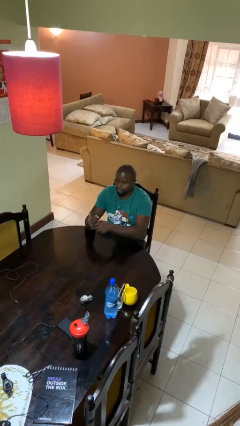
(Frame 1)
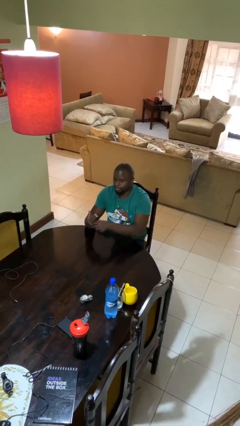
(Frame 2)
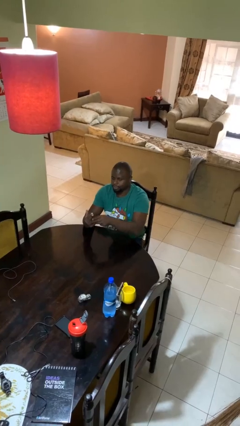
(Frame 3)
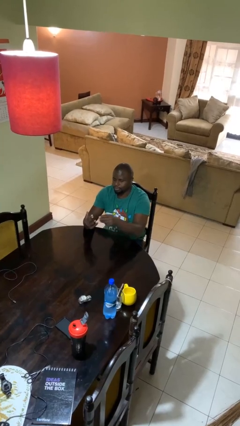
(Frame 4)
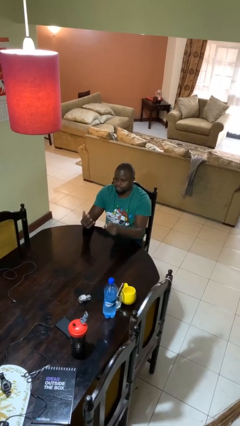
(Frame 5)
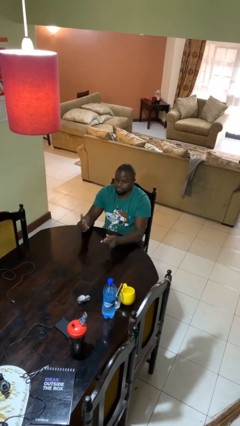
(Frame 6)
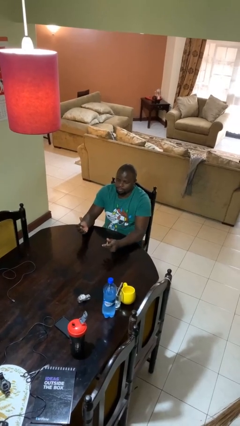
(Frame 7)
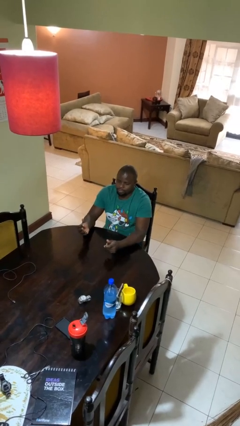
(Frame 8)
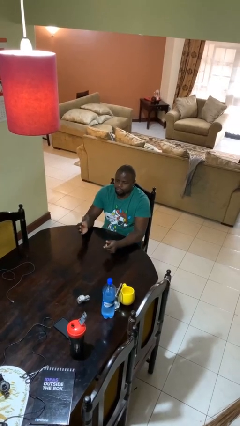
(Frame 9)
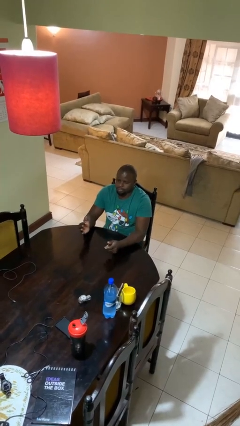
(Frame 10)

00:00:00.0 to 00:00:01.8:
person takes off ring

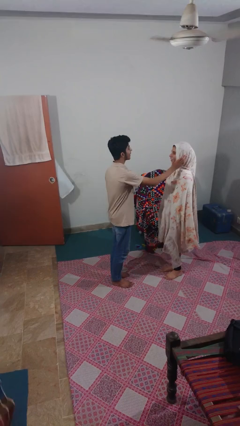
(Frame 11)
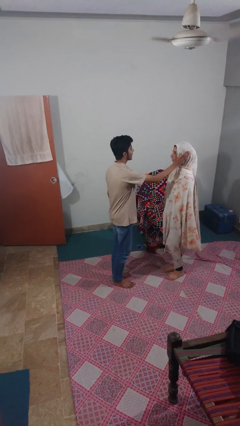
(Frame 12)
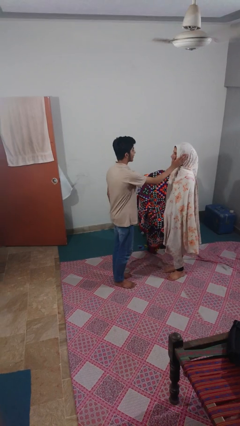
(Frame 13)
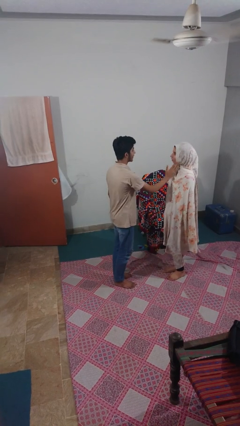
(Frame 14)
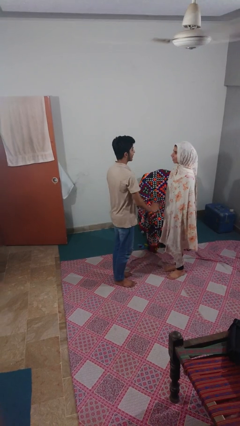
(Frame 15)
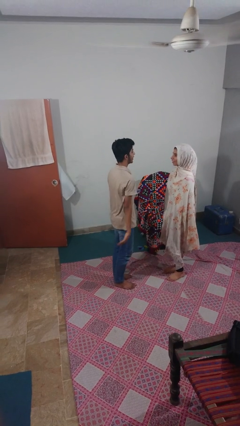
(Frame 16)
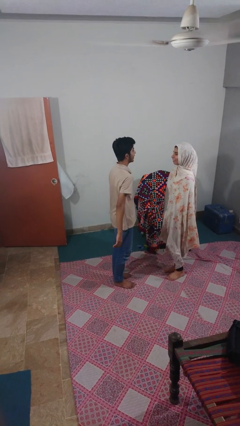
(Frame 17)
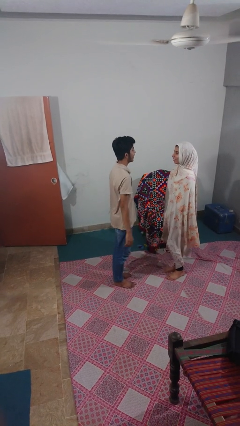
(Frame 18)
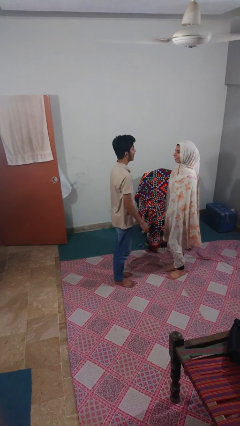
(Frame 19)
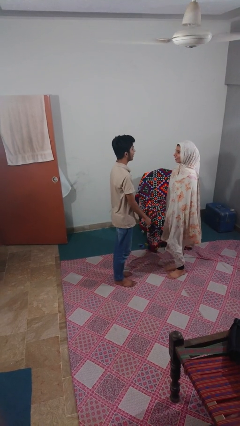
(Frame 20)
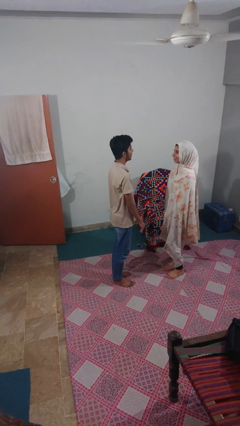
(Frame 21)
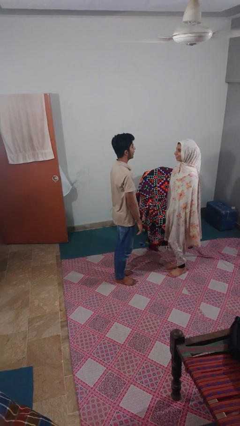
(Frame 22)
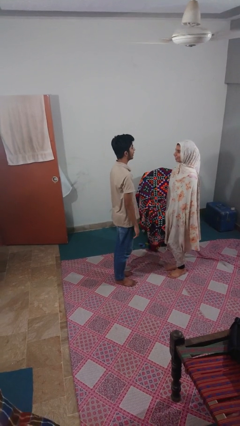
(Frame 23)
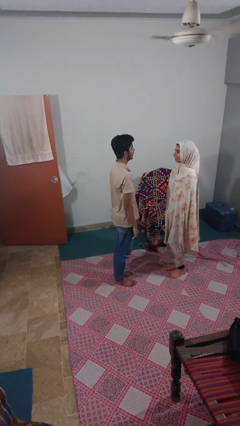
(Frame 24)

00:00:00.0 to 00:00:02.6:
person touches face of person

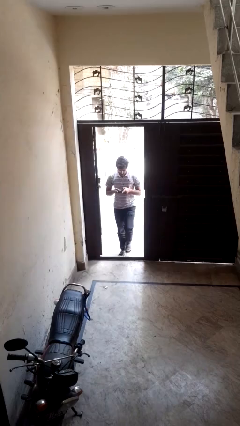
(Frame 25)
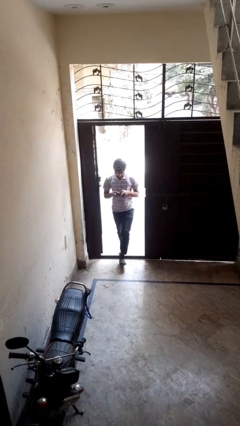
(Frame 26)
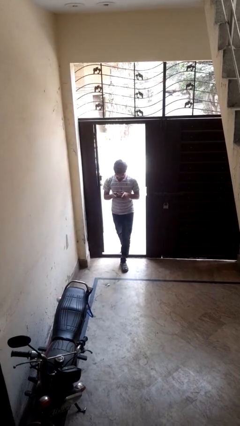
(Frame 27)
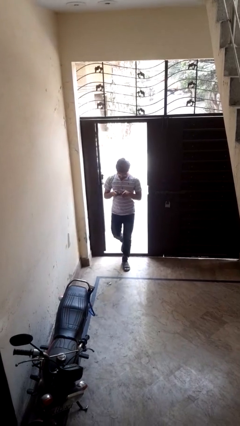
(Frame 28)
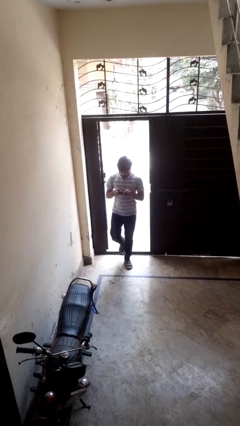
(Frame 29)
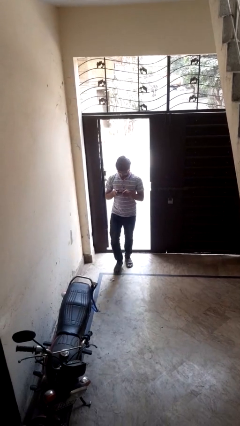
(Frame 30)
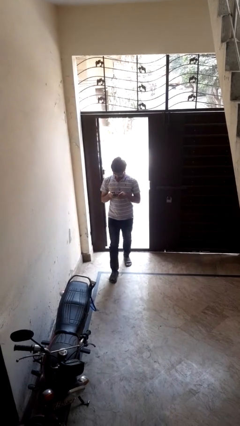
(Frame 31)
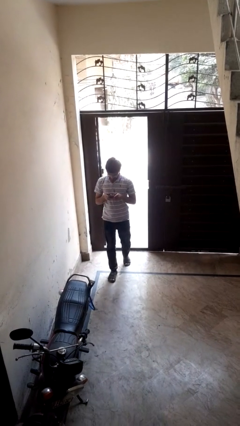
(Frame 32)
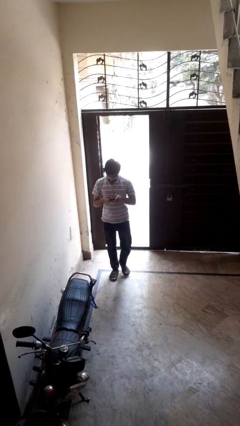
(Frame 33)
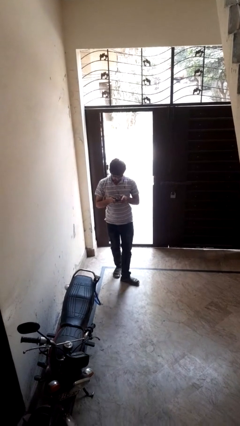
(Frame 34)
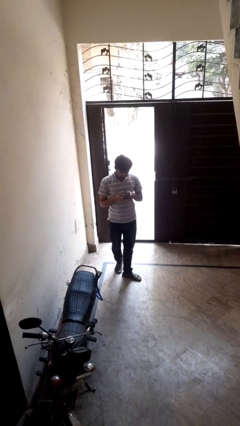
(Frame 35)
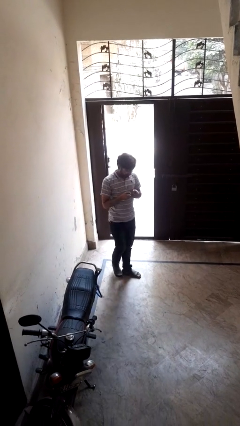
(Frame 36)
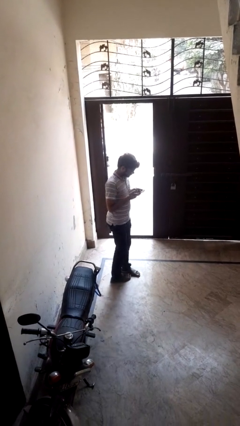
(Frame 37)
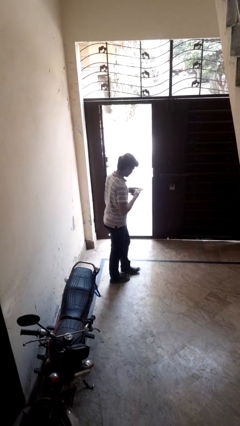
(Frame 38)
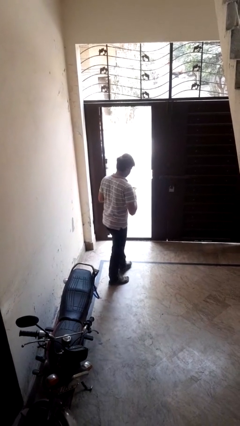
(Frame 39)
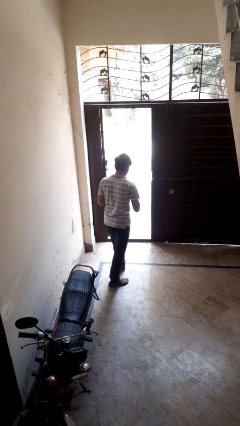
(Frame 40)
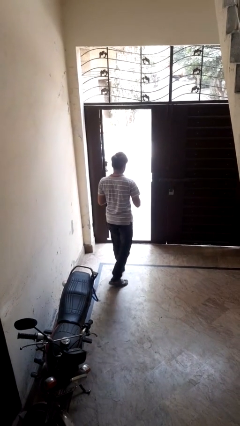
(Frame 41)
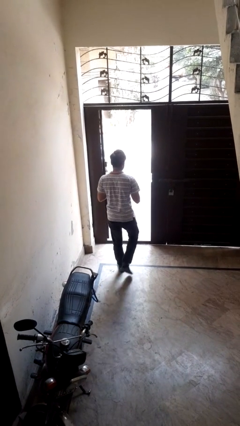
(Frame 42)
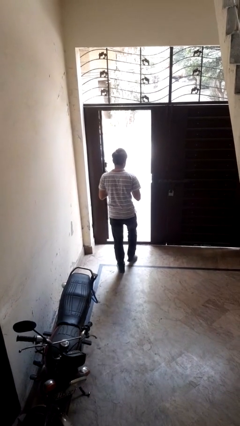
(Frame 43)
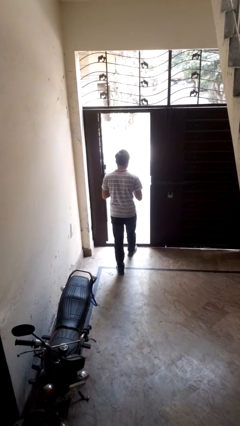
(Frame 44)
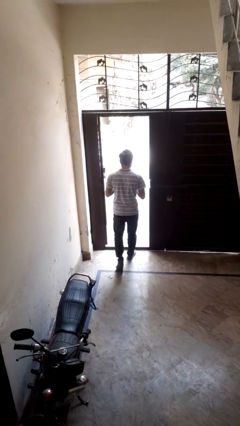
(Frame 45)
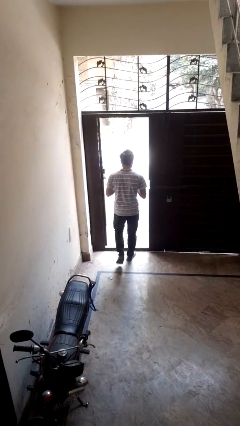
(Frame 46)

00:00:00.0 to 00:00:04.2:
person enters scene through structure

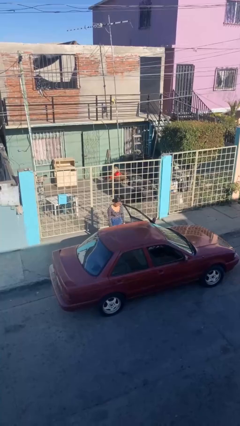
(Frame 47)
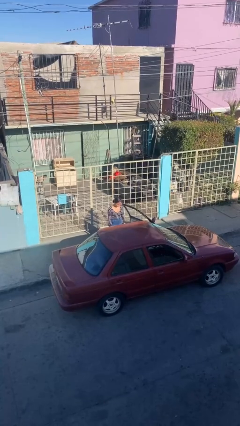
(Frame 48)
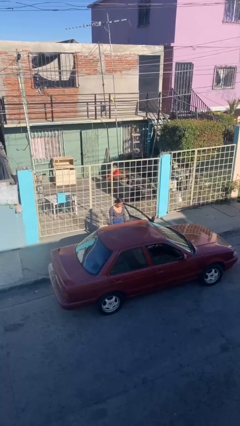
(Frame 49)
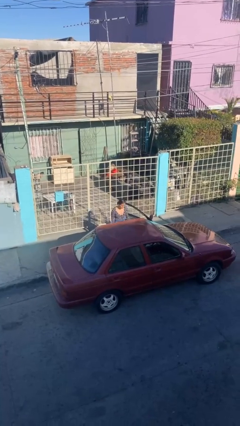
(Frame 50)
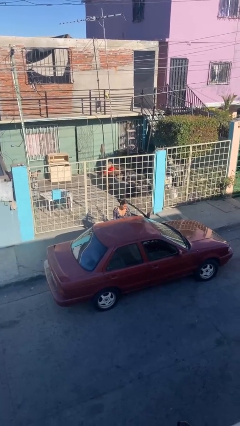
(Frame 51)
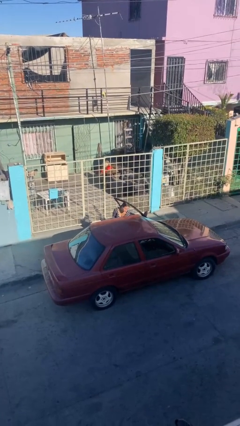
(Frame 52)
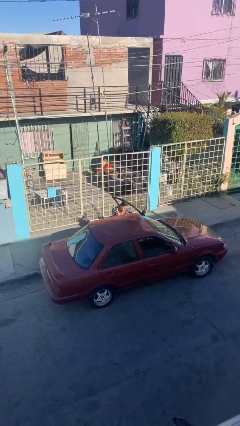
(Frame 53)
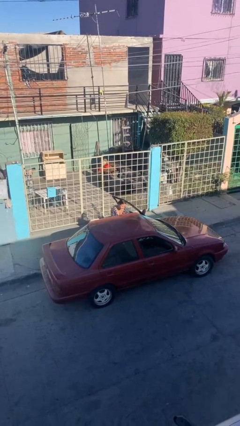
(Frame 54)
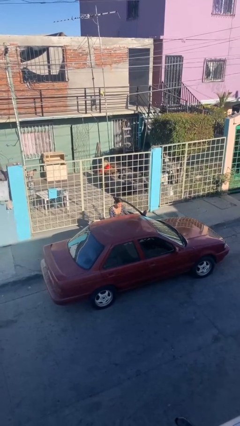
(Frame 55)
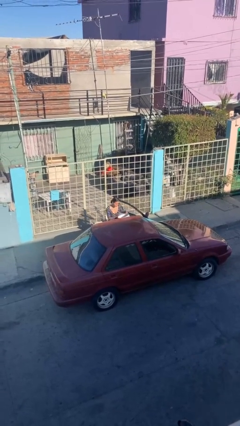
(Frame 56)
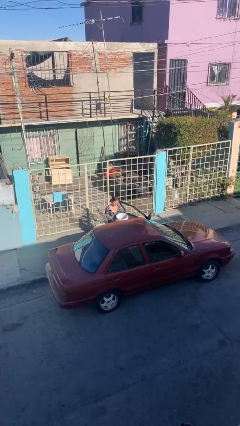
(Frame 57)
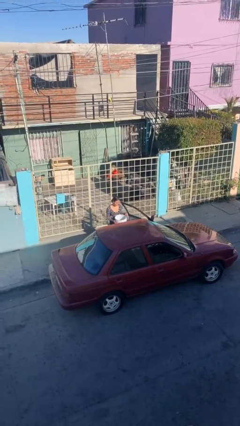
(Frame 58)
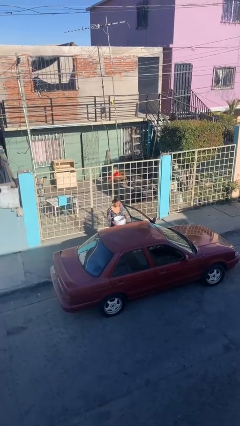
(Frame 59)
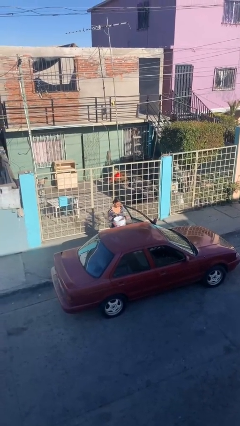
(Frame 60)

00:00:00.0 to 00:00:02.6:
person unloads car

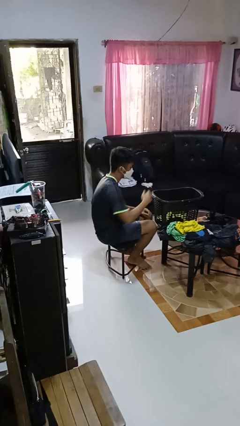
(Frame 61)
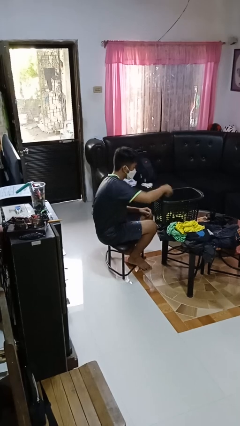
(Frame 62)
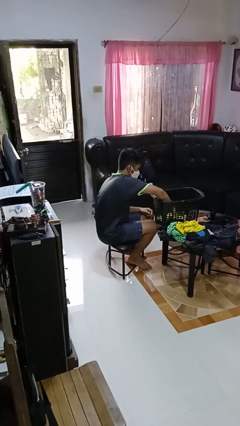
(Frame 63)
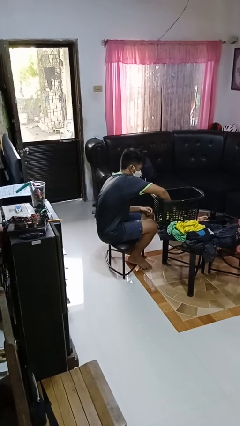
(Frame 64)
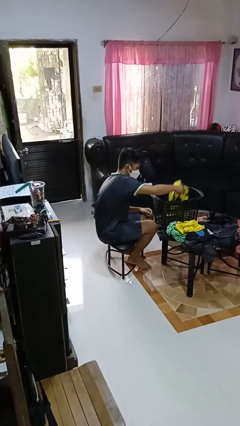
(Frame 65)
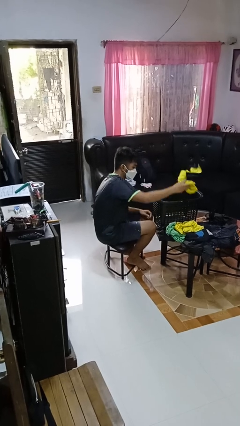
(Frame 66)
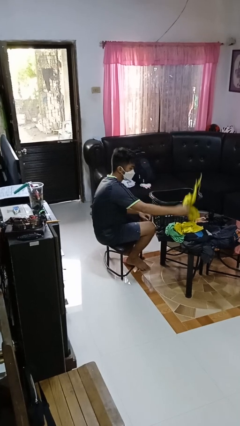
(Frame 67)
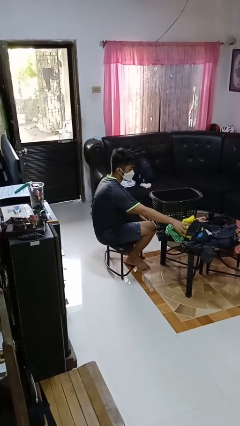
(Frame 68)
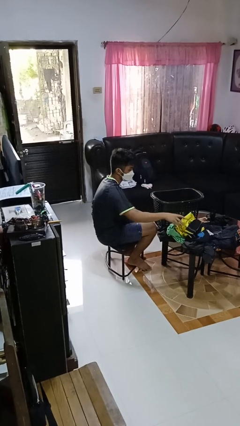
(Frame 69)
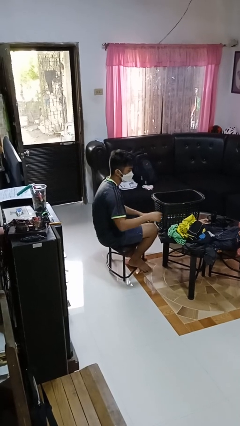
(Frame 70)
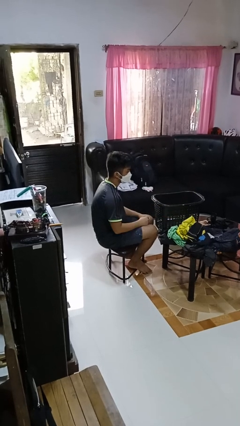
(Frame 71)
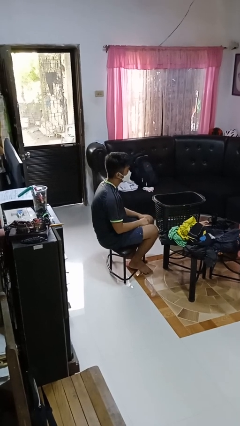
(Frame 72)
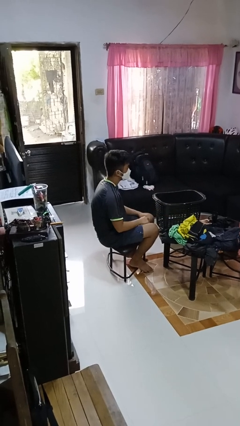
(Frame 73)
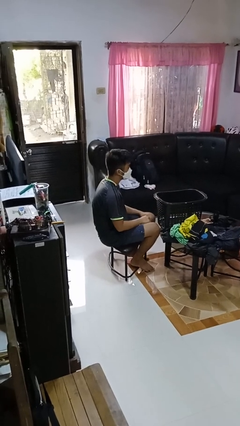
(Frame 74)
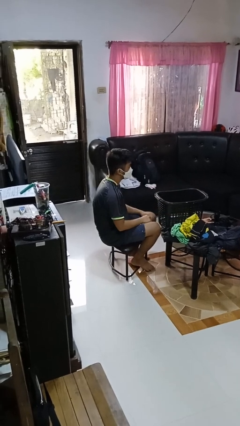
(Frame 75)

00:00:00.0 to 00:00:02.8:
person takes object from basket

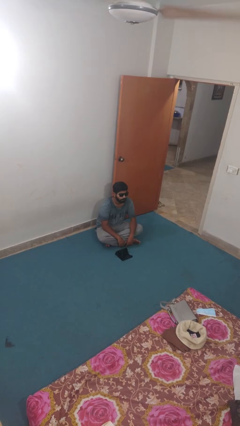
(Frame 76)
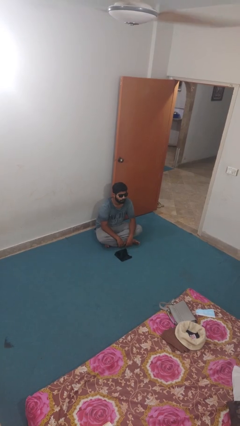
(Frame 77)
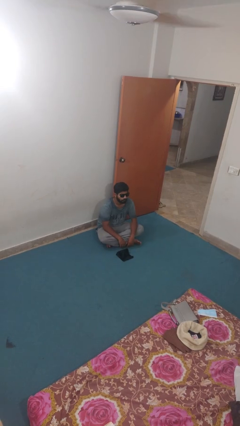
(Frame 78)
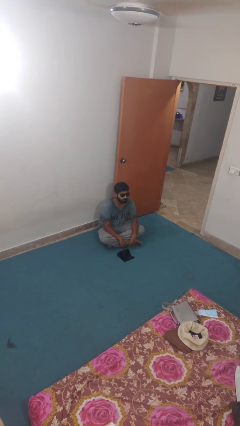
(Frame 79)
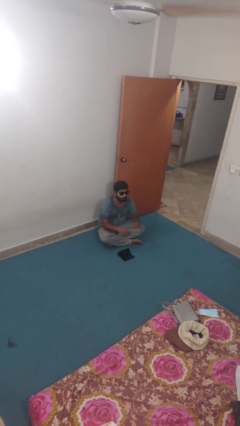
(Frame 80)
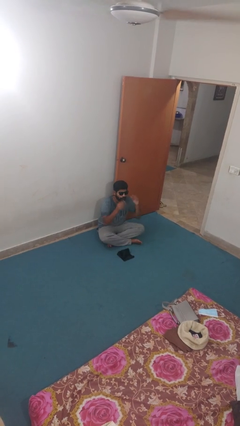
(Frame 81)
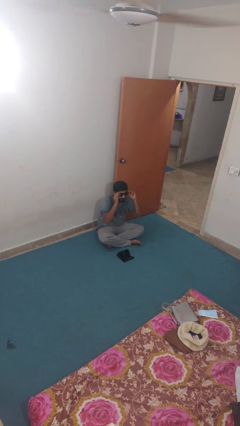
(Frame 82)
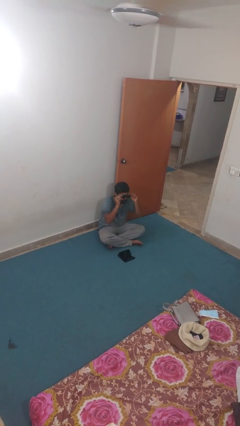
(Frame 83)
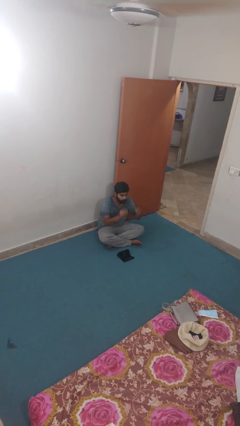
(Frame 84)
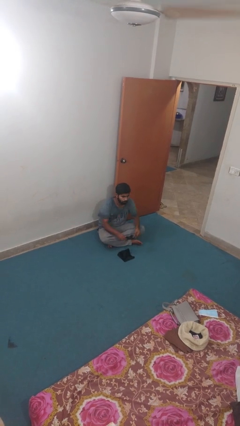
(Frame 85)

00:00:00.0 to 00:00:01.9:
person takes off sunglasses

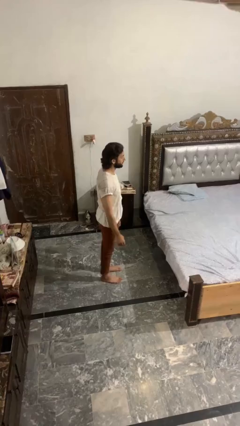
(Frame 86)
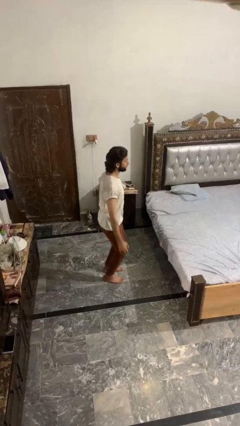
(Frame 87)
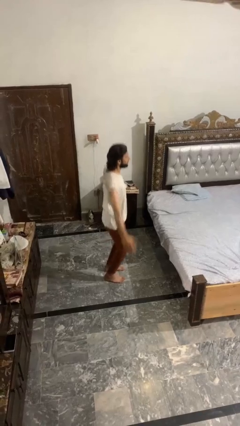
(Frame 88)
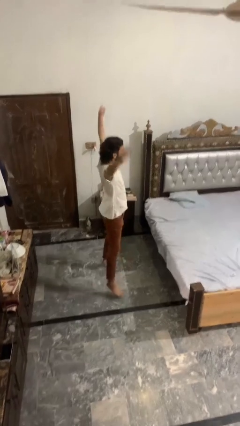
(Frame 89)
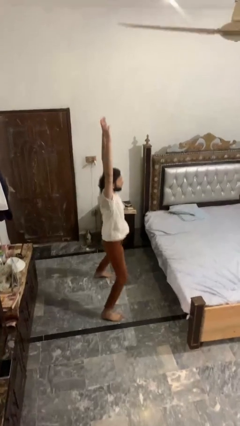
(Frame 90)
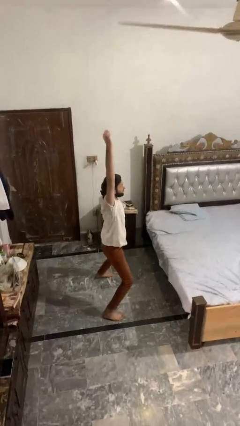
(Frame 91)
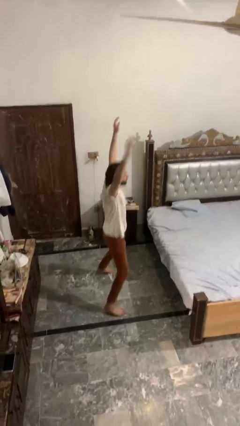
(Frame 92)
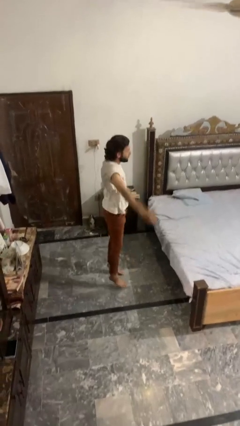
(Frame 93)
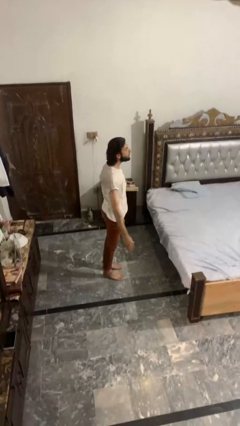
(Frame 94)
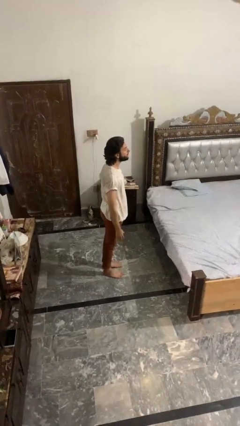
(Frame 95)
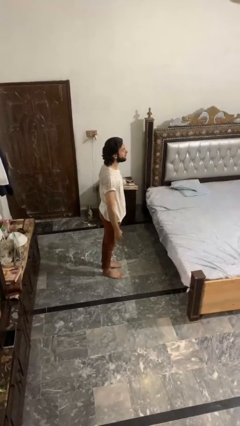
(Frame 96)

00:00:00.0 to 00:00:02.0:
person exercises with jumping jacks
